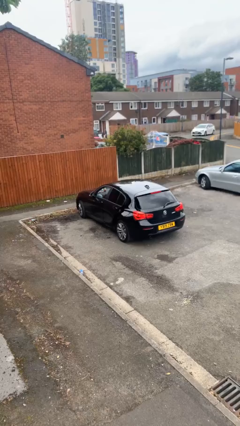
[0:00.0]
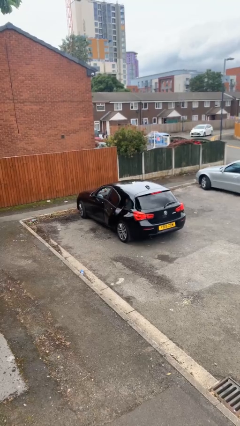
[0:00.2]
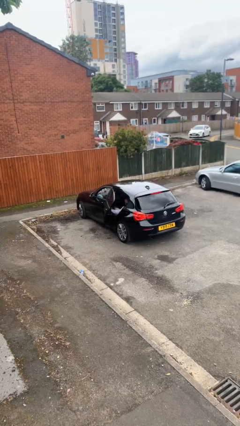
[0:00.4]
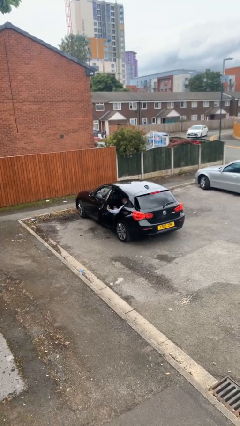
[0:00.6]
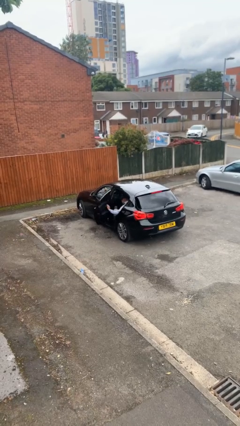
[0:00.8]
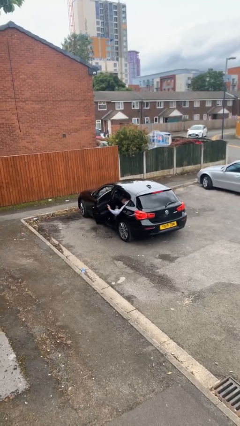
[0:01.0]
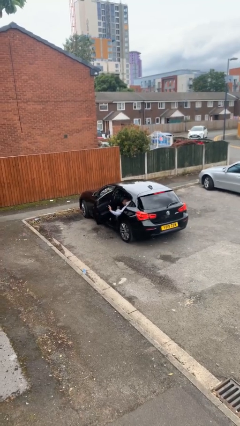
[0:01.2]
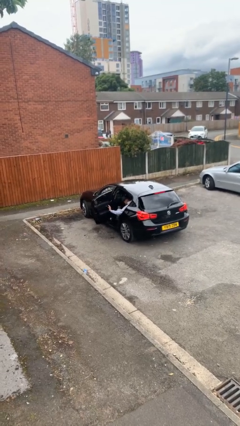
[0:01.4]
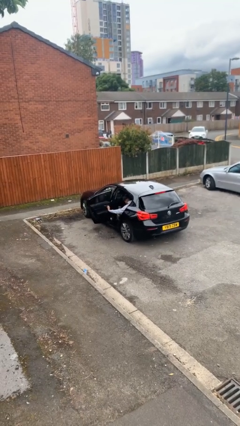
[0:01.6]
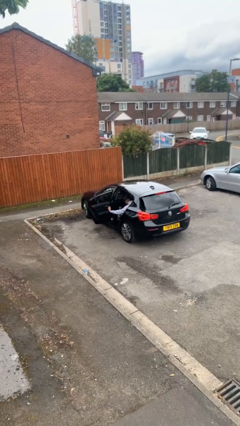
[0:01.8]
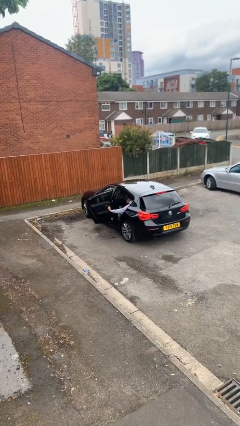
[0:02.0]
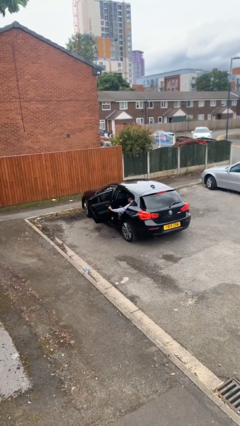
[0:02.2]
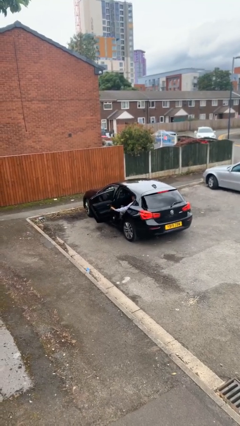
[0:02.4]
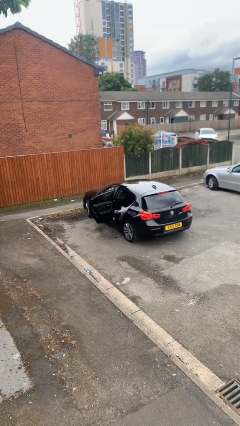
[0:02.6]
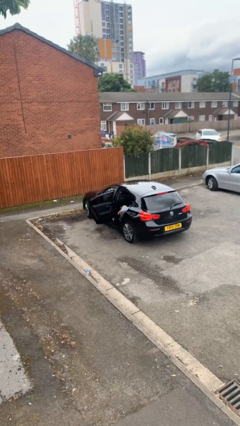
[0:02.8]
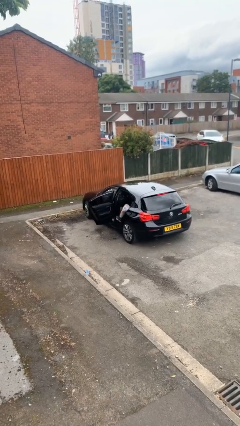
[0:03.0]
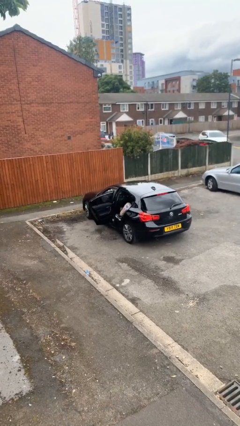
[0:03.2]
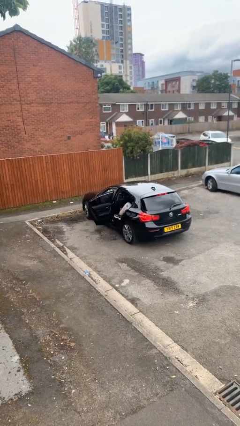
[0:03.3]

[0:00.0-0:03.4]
person opens car door

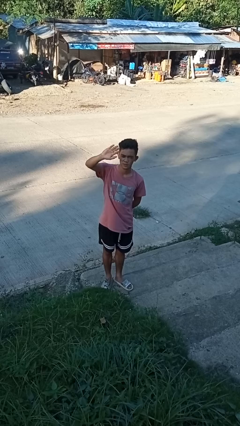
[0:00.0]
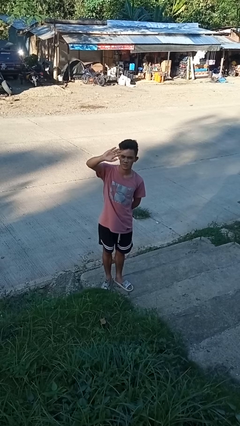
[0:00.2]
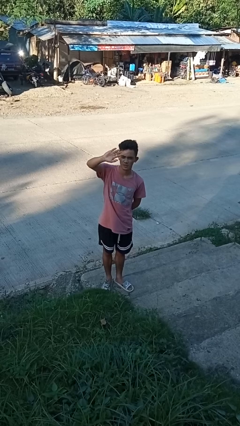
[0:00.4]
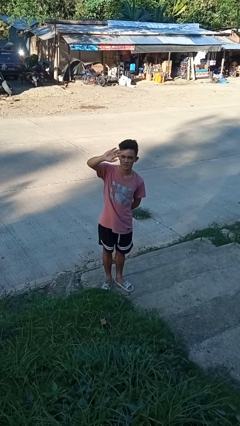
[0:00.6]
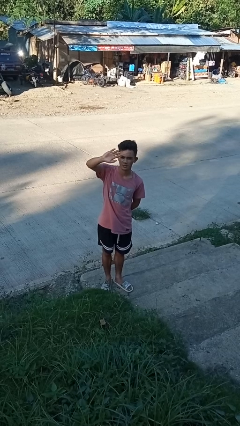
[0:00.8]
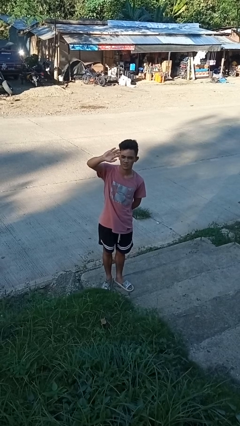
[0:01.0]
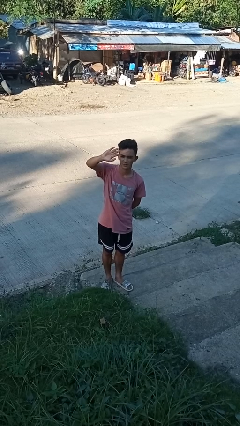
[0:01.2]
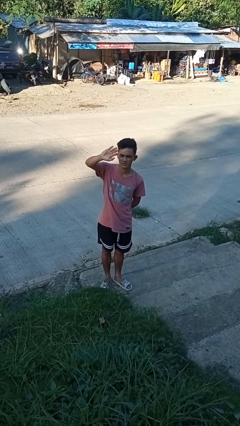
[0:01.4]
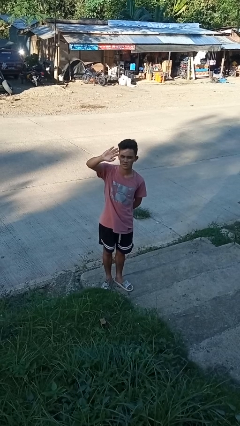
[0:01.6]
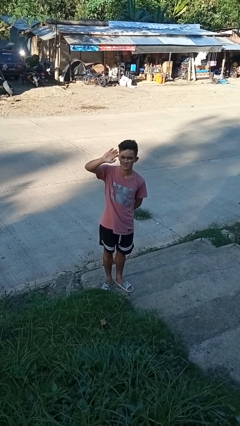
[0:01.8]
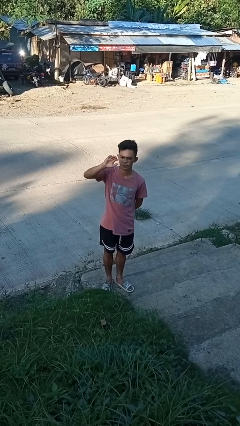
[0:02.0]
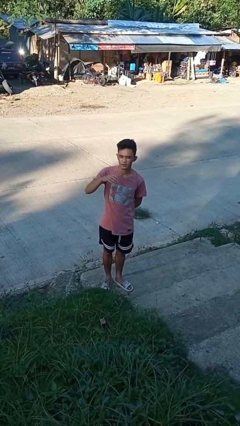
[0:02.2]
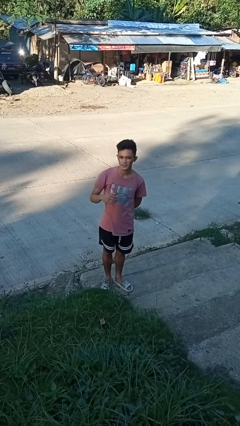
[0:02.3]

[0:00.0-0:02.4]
person shades eyes

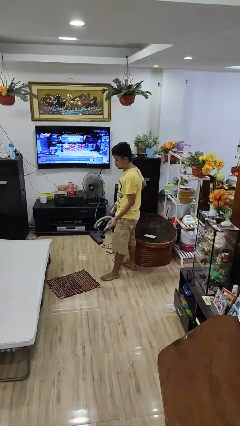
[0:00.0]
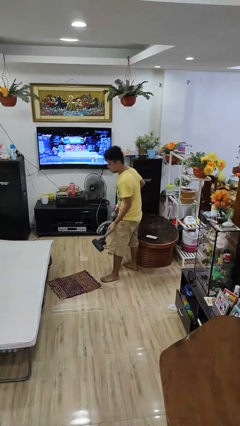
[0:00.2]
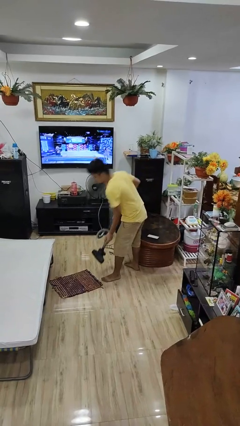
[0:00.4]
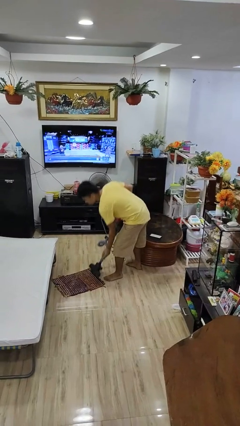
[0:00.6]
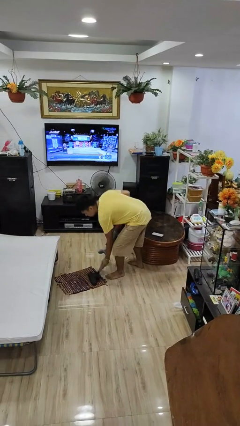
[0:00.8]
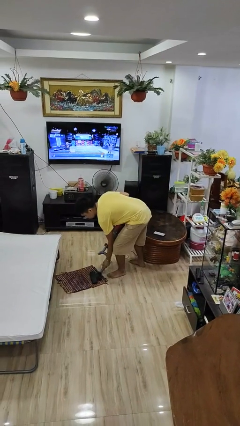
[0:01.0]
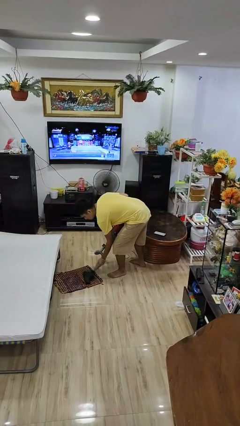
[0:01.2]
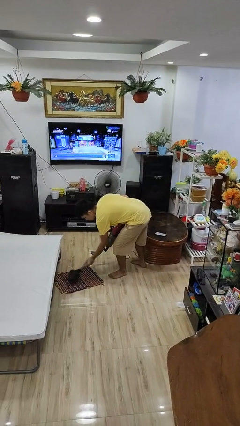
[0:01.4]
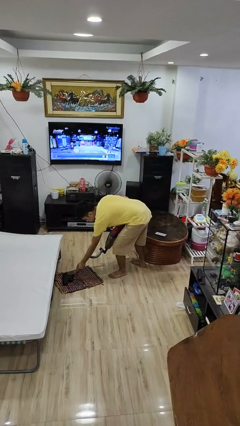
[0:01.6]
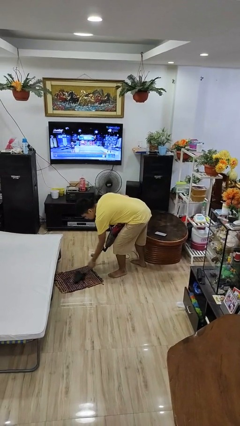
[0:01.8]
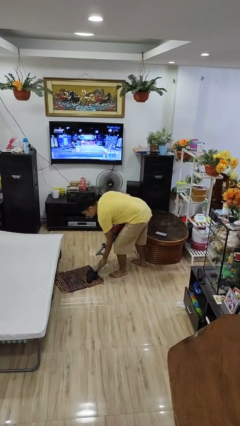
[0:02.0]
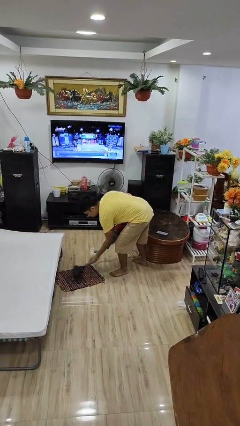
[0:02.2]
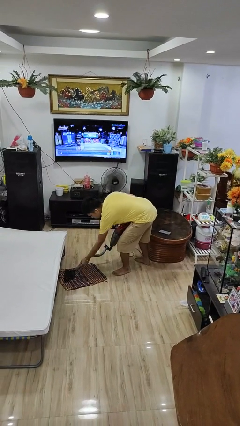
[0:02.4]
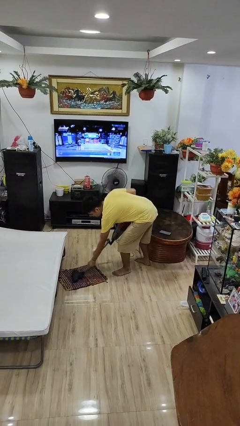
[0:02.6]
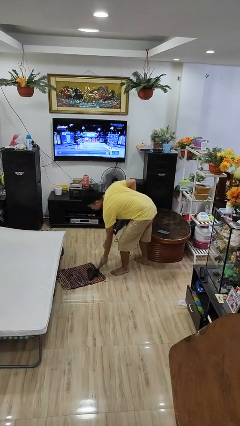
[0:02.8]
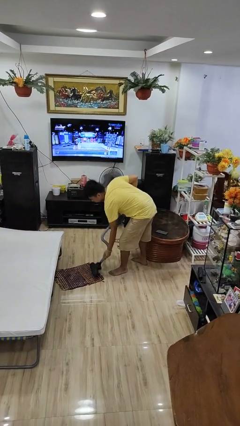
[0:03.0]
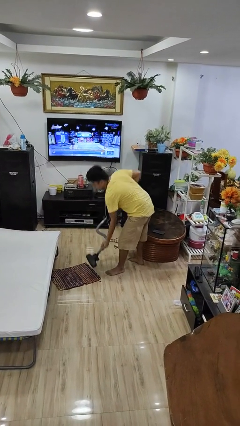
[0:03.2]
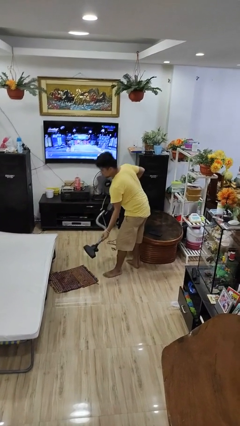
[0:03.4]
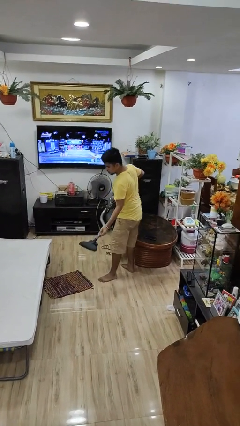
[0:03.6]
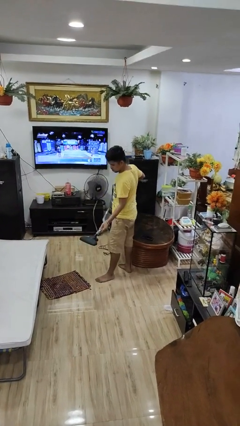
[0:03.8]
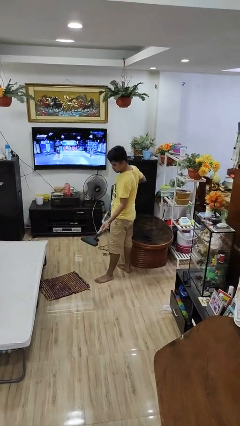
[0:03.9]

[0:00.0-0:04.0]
person vacuums carpet

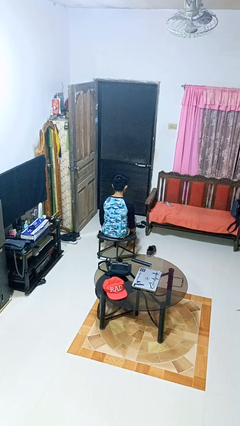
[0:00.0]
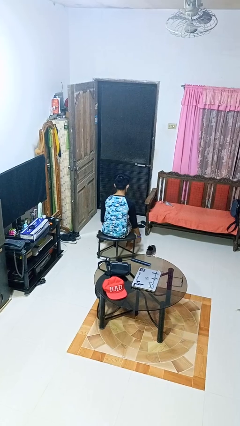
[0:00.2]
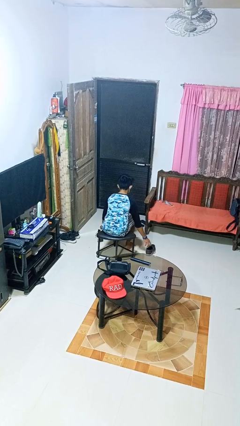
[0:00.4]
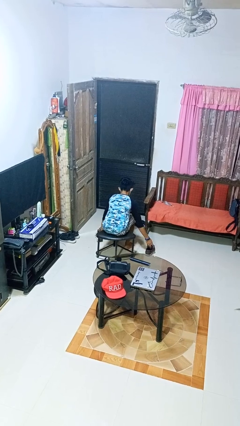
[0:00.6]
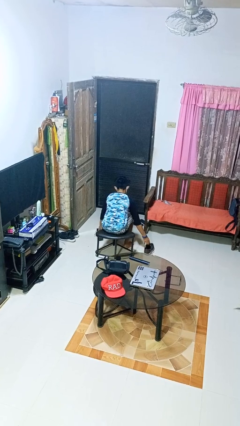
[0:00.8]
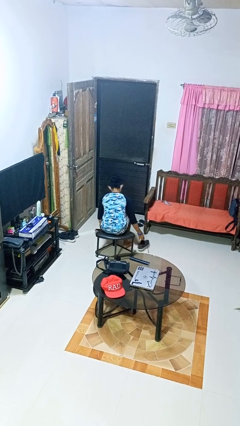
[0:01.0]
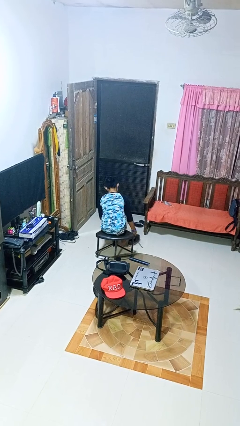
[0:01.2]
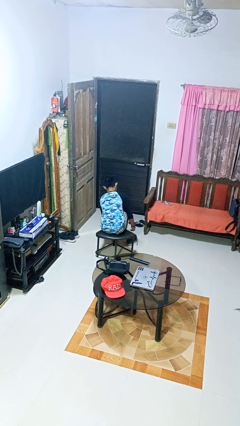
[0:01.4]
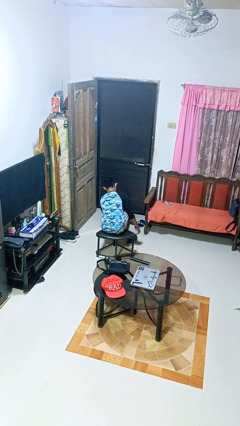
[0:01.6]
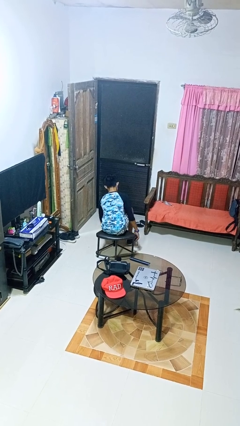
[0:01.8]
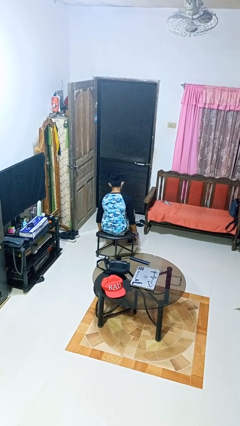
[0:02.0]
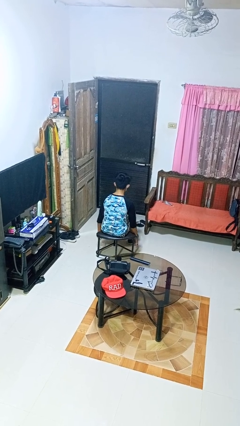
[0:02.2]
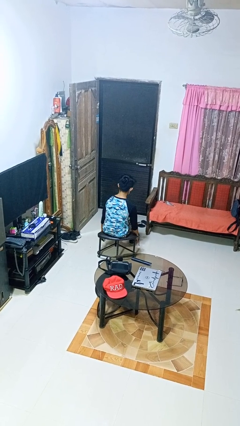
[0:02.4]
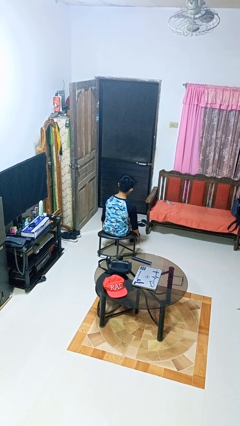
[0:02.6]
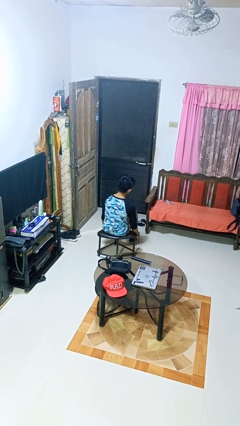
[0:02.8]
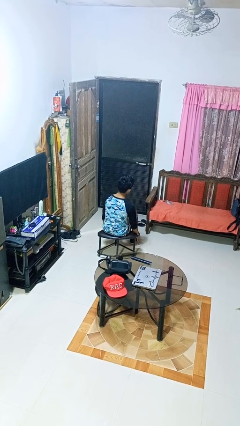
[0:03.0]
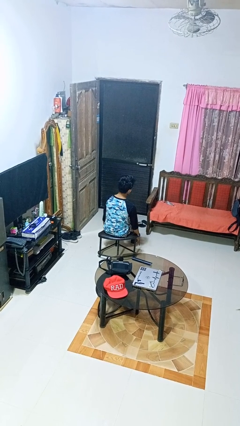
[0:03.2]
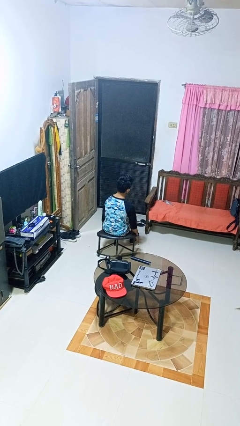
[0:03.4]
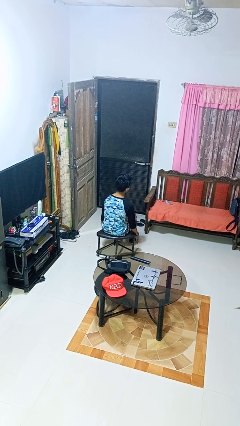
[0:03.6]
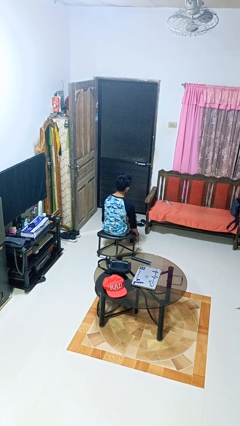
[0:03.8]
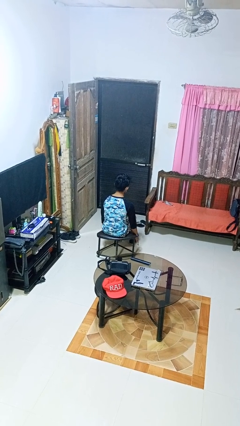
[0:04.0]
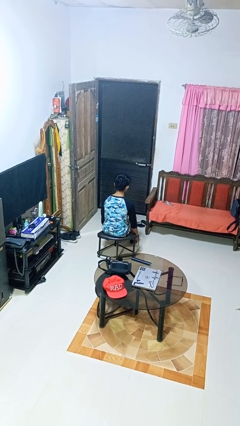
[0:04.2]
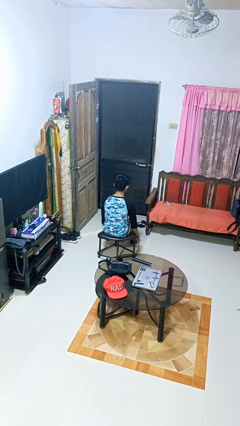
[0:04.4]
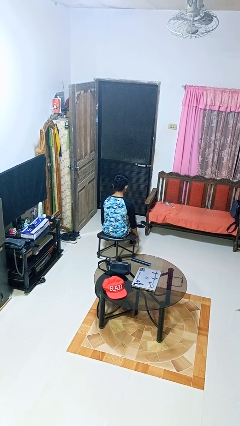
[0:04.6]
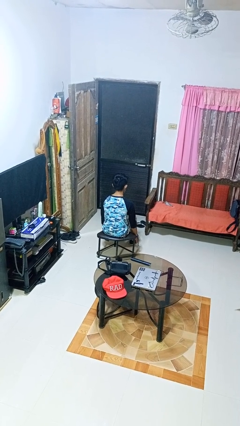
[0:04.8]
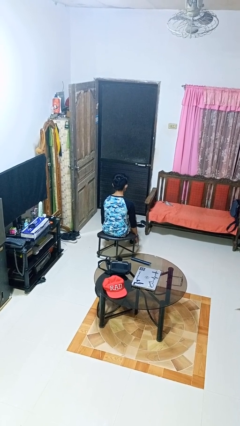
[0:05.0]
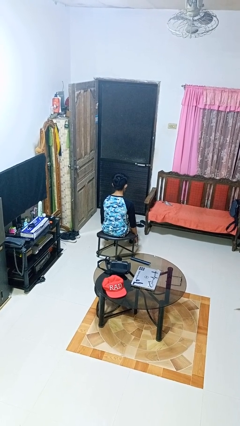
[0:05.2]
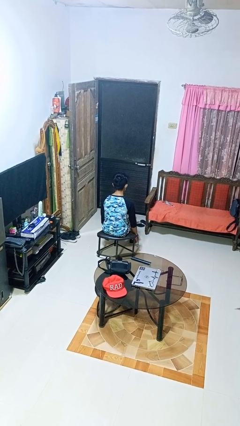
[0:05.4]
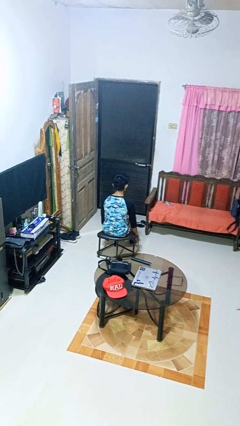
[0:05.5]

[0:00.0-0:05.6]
person puts on shoes

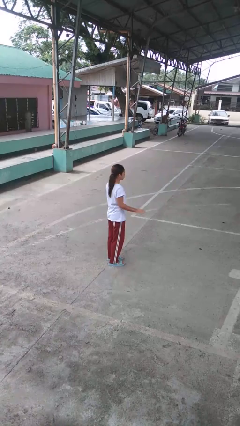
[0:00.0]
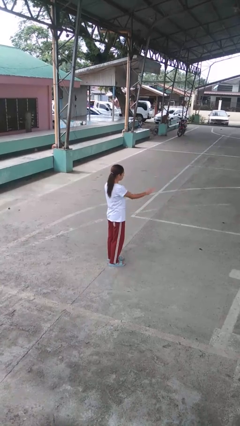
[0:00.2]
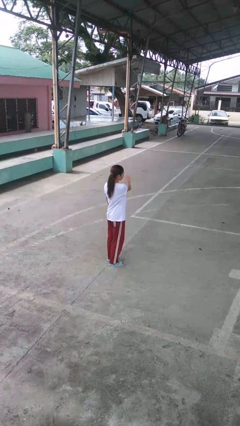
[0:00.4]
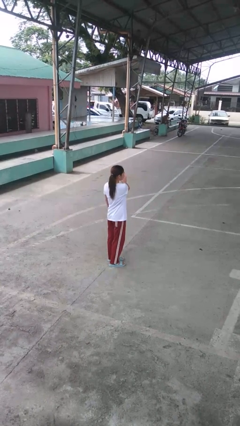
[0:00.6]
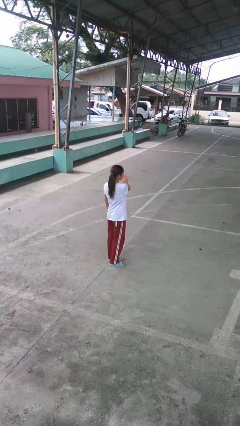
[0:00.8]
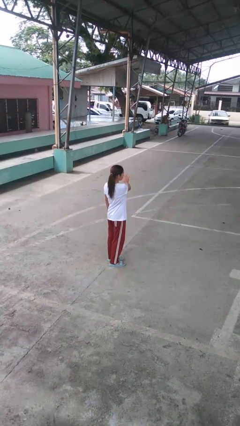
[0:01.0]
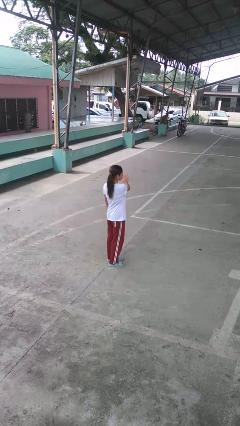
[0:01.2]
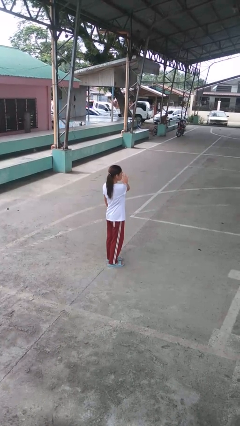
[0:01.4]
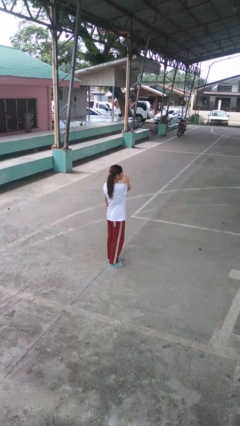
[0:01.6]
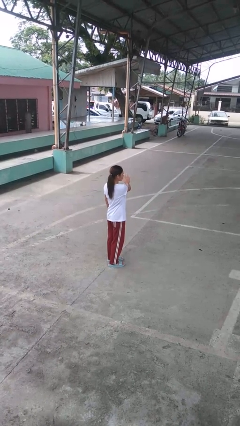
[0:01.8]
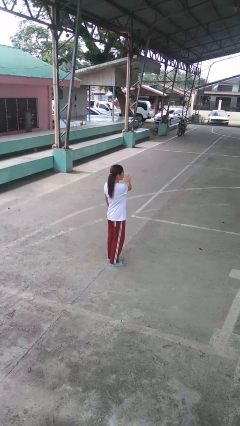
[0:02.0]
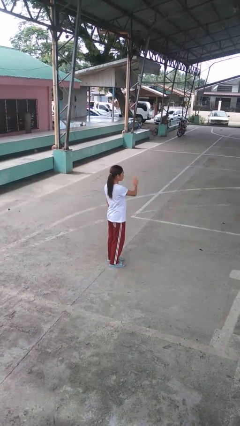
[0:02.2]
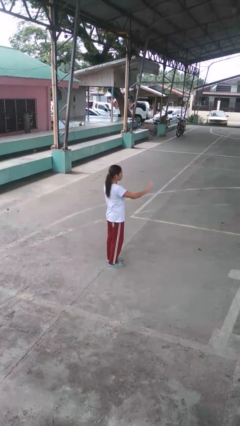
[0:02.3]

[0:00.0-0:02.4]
person gestures swipe left
